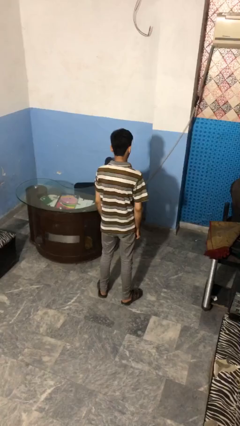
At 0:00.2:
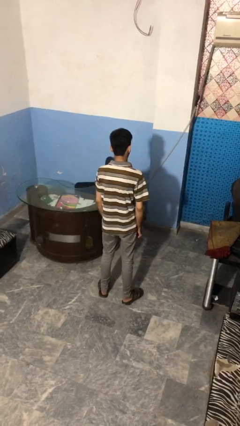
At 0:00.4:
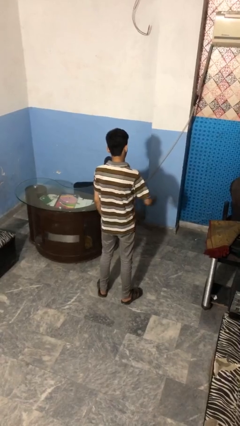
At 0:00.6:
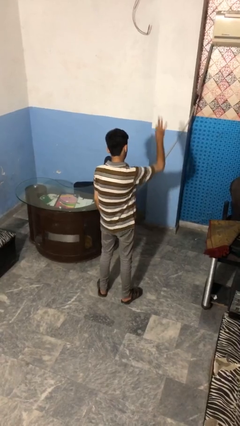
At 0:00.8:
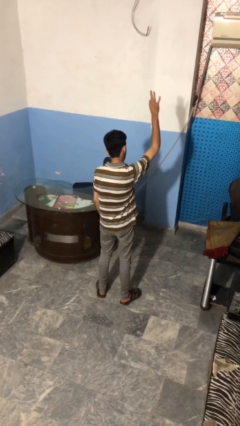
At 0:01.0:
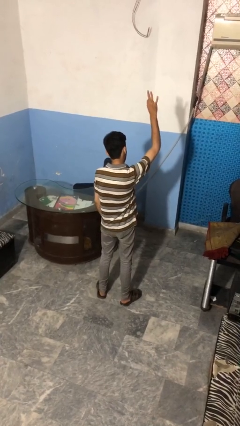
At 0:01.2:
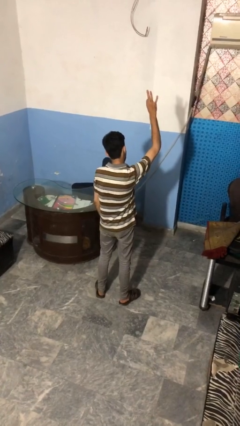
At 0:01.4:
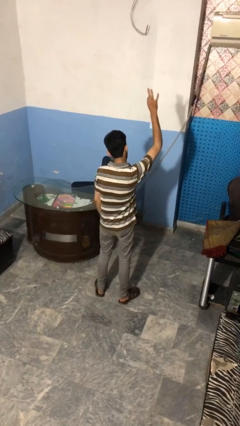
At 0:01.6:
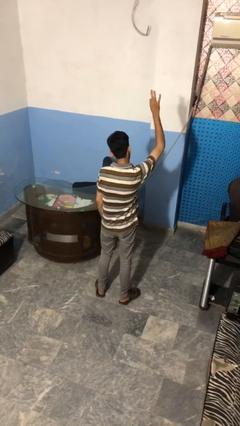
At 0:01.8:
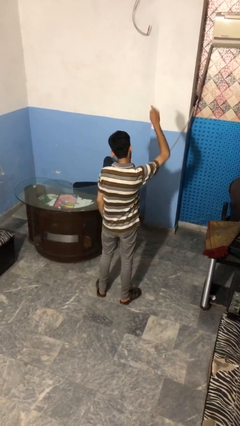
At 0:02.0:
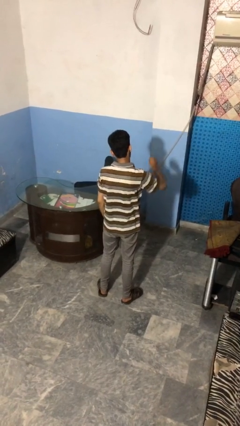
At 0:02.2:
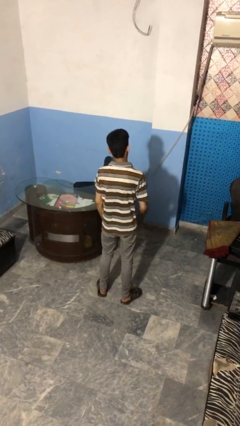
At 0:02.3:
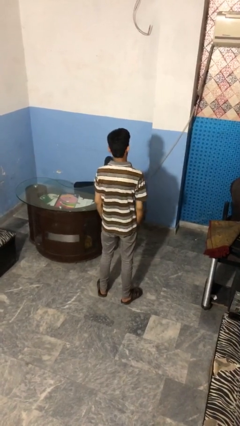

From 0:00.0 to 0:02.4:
person gestures number three

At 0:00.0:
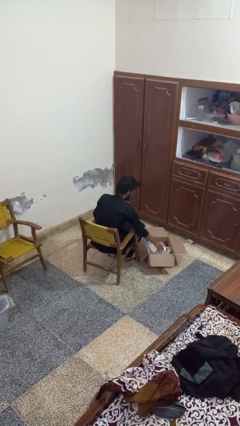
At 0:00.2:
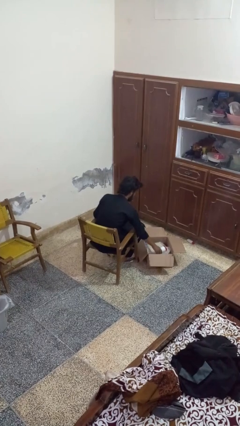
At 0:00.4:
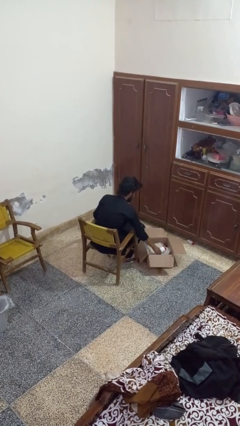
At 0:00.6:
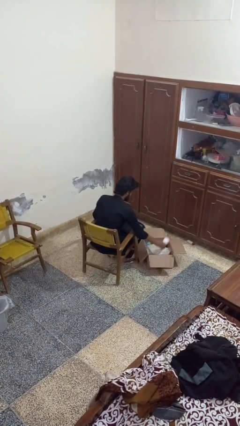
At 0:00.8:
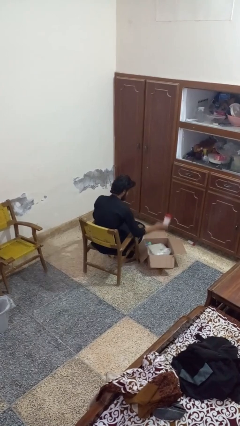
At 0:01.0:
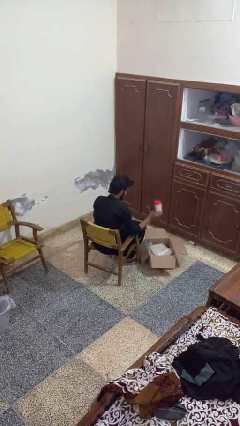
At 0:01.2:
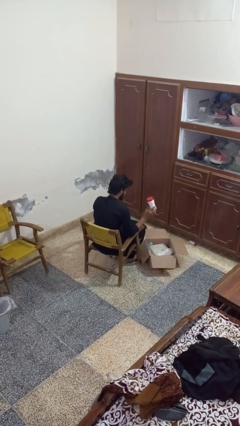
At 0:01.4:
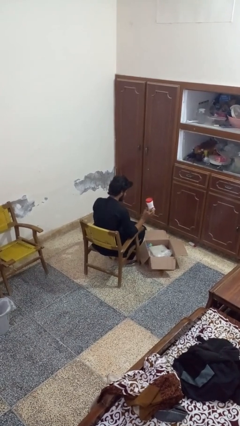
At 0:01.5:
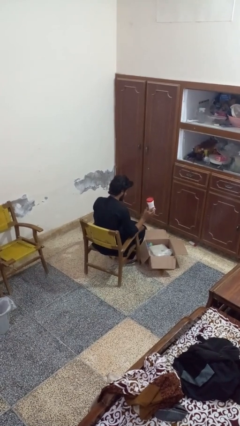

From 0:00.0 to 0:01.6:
person takes object from box

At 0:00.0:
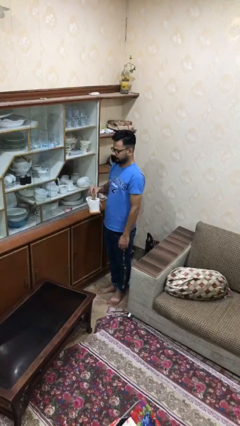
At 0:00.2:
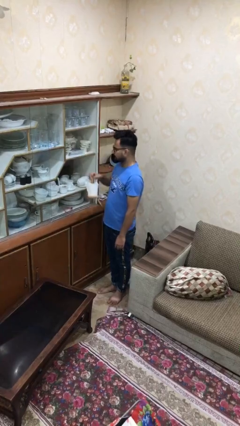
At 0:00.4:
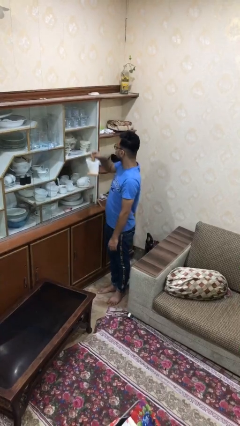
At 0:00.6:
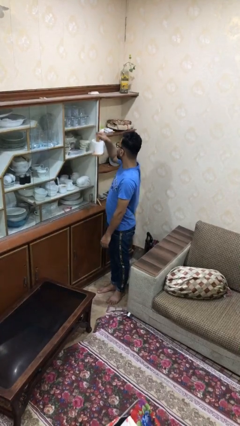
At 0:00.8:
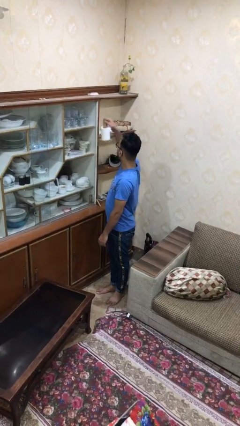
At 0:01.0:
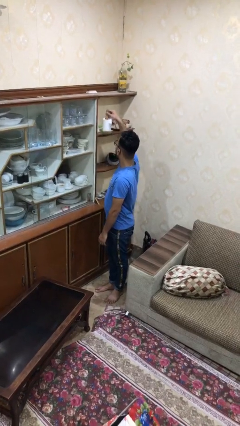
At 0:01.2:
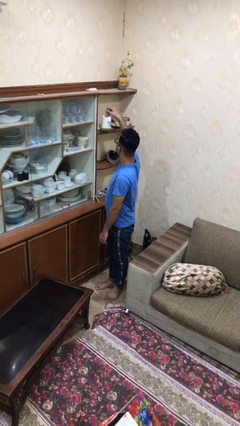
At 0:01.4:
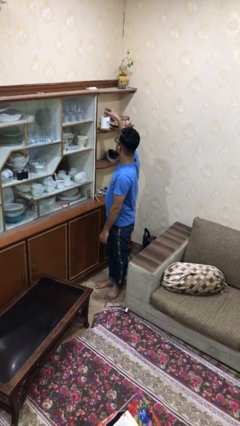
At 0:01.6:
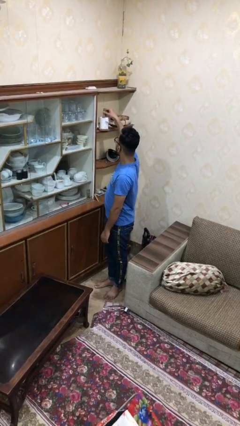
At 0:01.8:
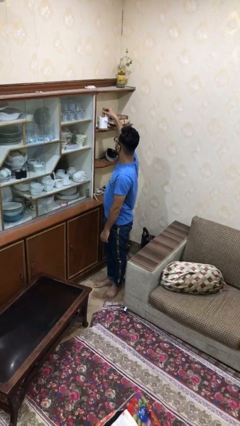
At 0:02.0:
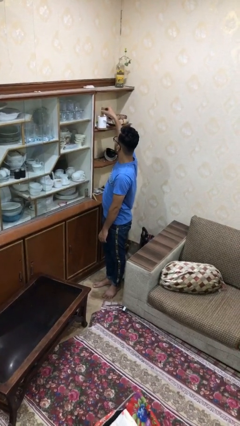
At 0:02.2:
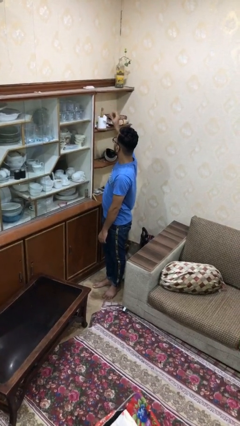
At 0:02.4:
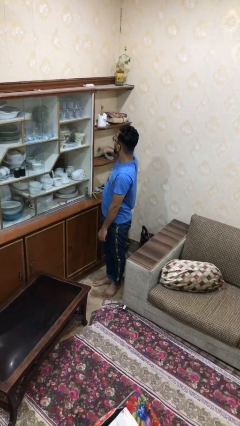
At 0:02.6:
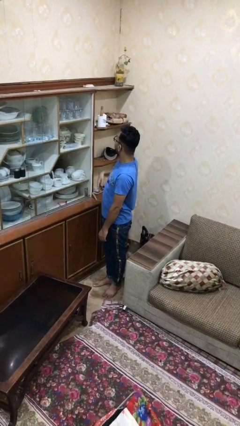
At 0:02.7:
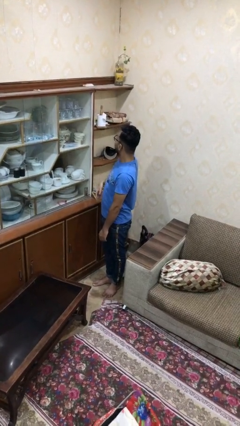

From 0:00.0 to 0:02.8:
person puts down object on shelf

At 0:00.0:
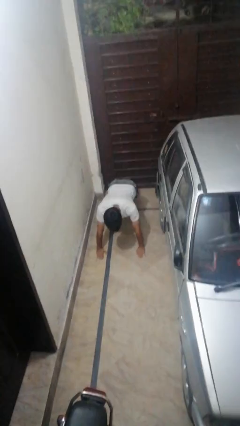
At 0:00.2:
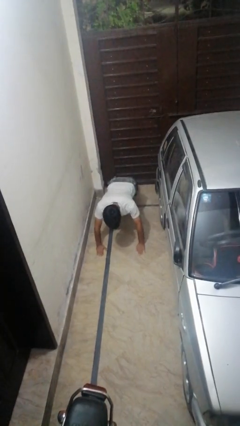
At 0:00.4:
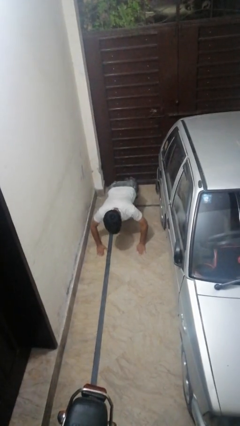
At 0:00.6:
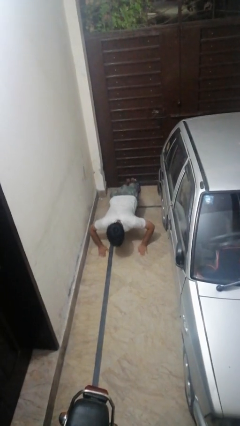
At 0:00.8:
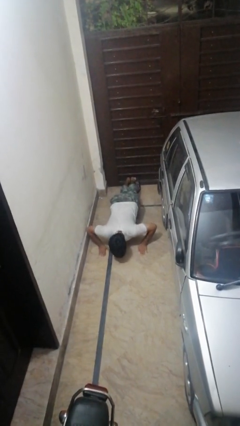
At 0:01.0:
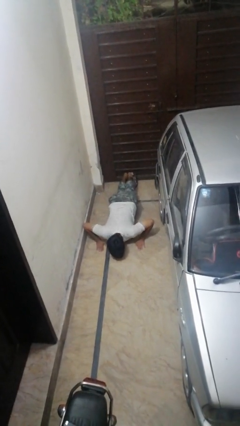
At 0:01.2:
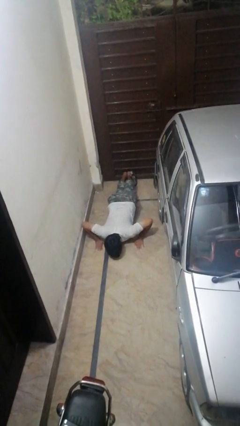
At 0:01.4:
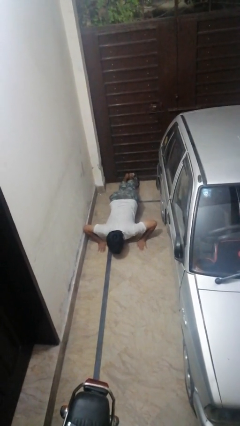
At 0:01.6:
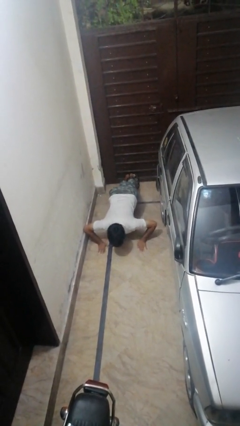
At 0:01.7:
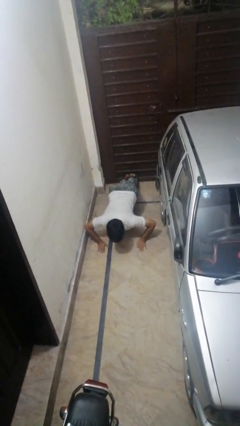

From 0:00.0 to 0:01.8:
person exercises with pushup

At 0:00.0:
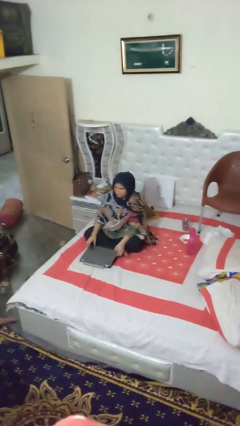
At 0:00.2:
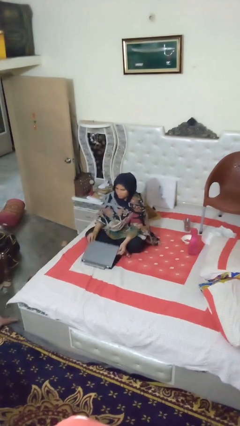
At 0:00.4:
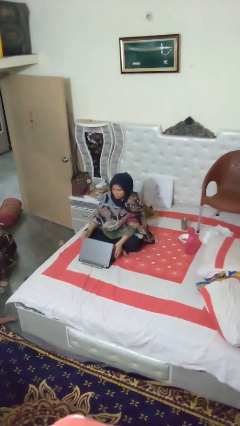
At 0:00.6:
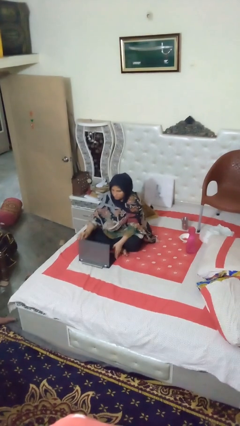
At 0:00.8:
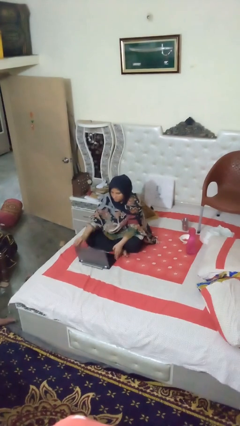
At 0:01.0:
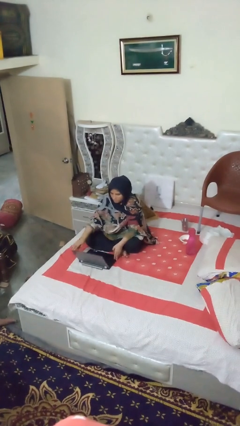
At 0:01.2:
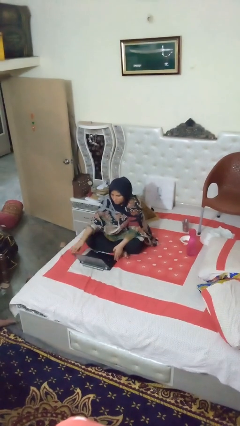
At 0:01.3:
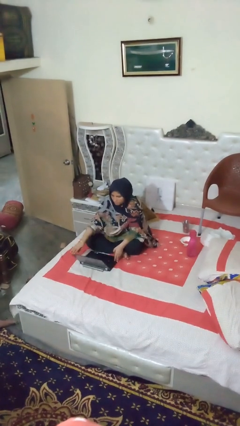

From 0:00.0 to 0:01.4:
person opens laptop

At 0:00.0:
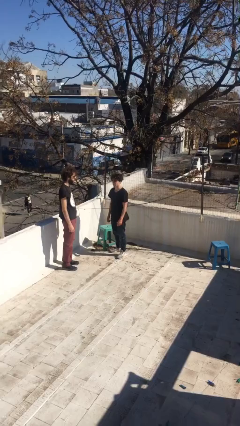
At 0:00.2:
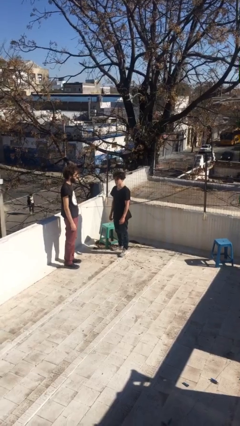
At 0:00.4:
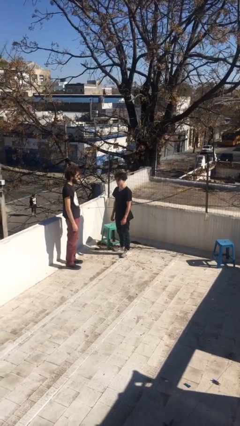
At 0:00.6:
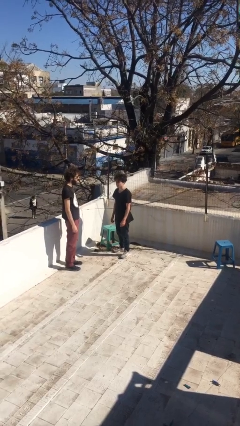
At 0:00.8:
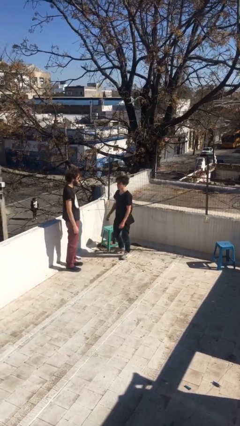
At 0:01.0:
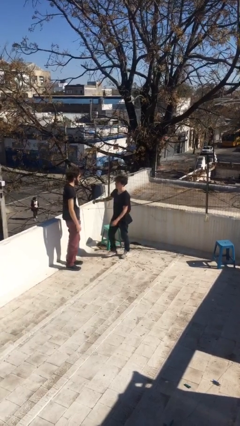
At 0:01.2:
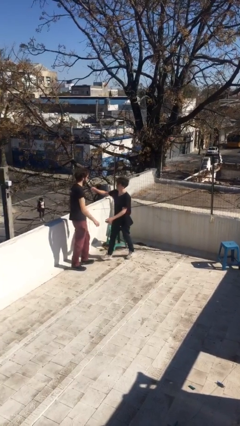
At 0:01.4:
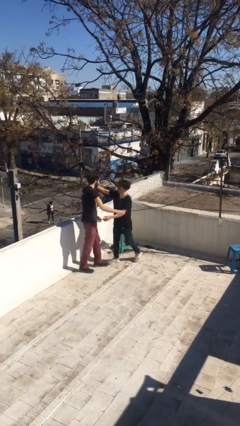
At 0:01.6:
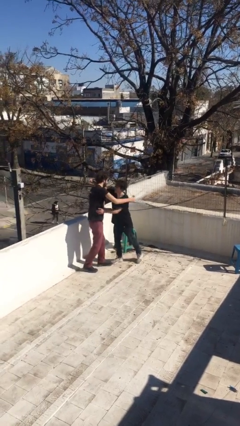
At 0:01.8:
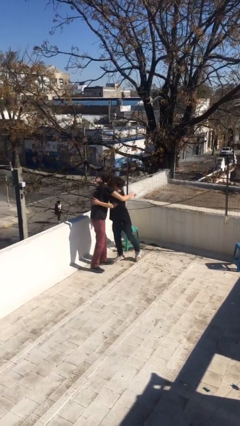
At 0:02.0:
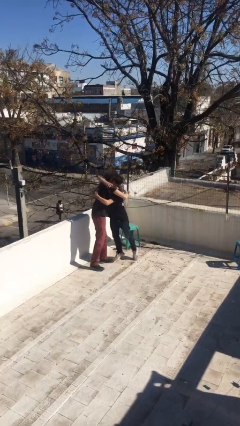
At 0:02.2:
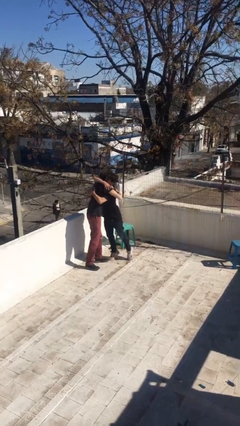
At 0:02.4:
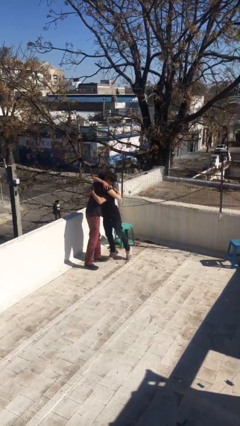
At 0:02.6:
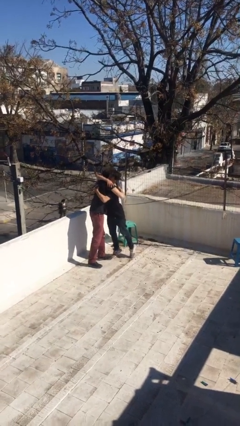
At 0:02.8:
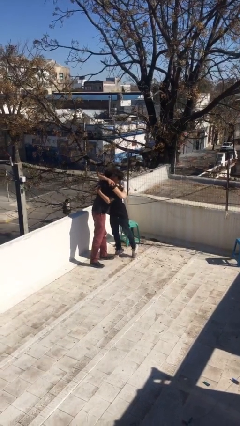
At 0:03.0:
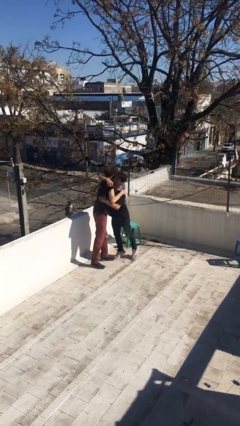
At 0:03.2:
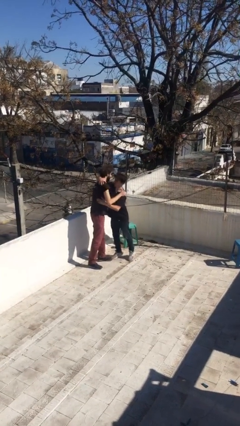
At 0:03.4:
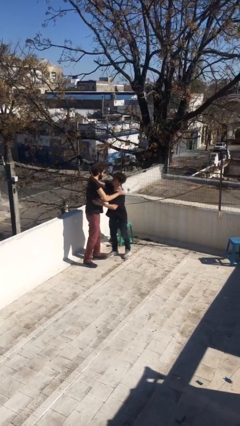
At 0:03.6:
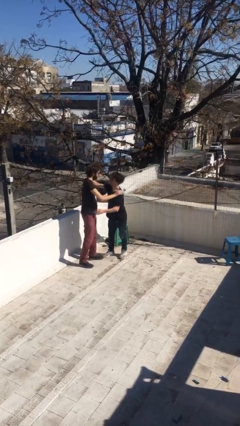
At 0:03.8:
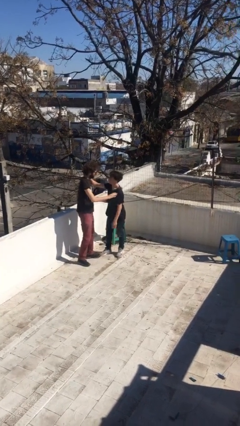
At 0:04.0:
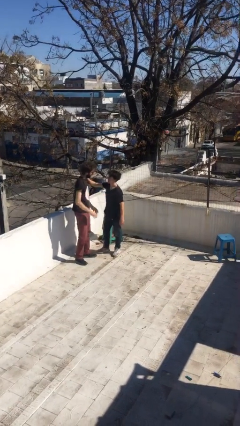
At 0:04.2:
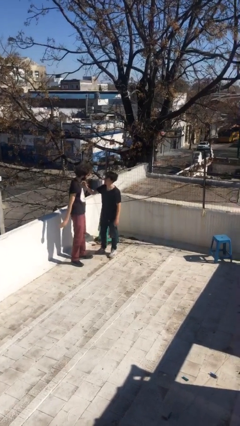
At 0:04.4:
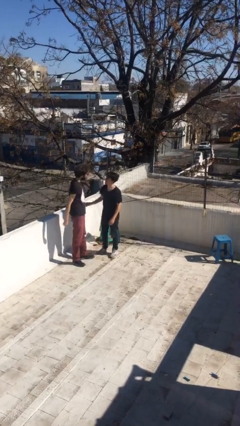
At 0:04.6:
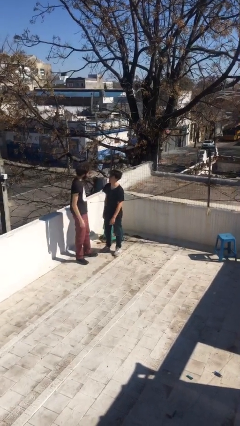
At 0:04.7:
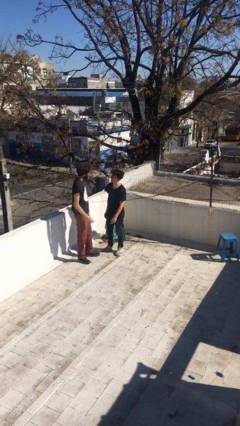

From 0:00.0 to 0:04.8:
person embraces person

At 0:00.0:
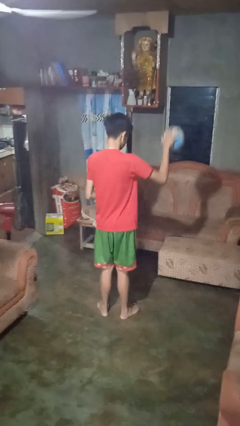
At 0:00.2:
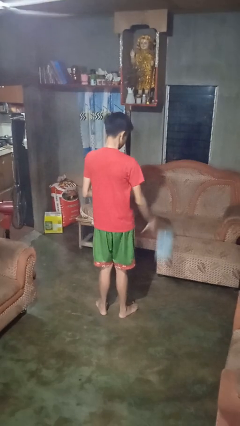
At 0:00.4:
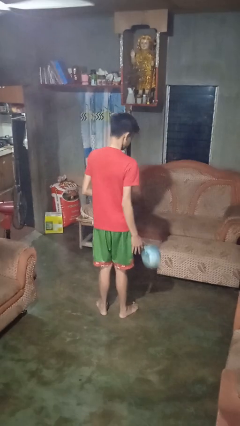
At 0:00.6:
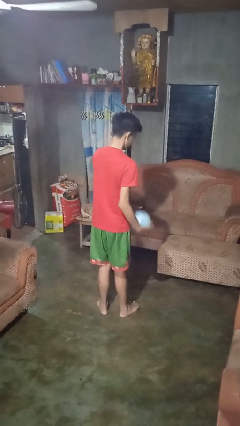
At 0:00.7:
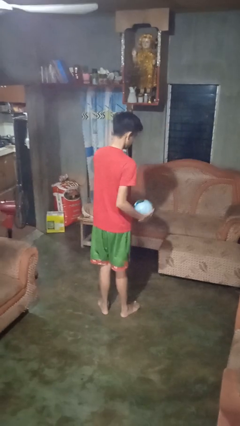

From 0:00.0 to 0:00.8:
person bounces ball on floor

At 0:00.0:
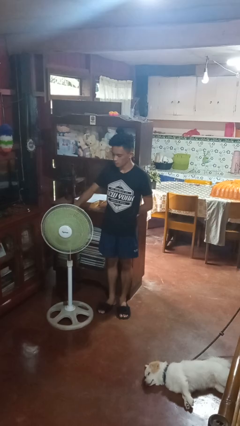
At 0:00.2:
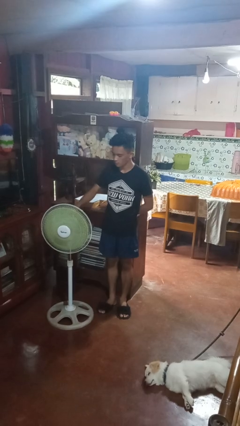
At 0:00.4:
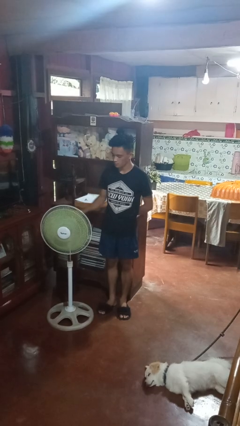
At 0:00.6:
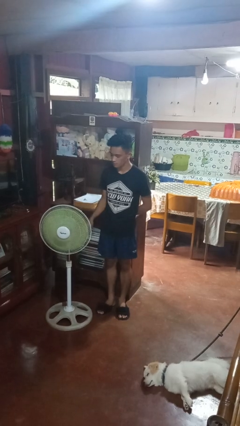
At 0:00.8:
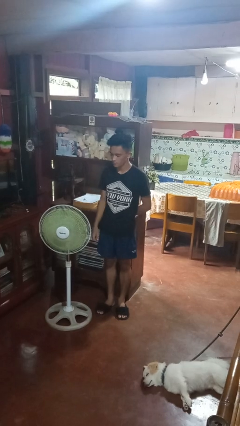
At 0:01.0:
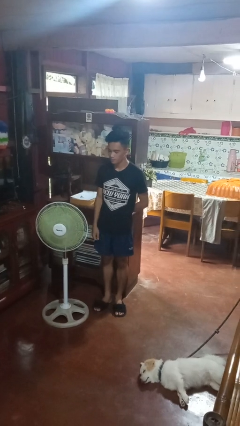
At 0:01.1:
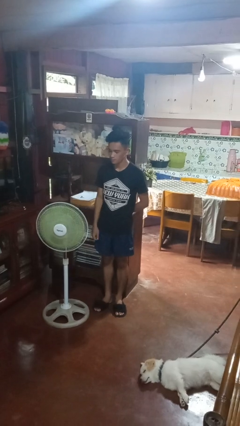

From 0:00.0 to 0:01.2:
person turns off fan

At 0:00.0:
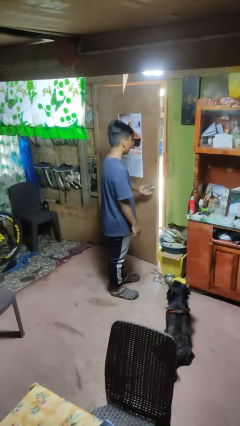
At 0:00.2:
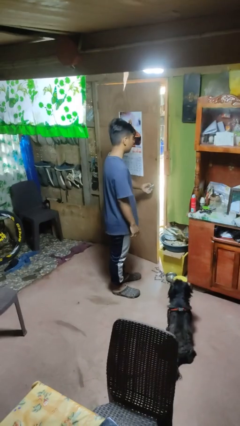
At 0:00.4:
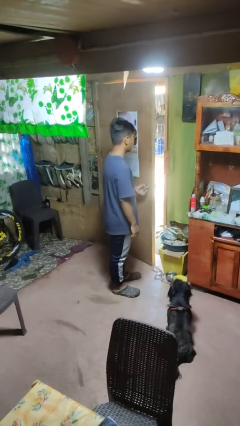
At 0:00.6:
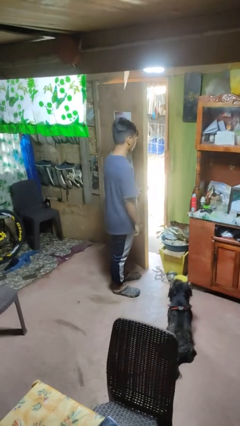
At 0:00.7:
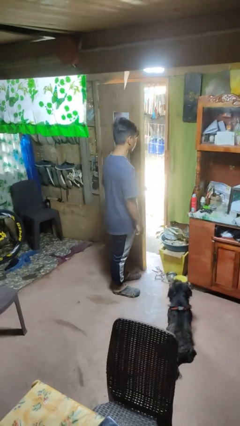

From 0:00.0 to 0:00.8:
person opens facility door
